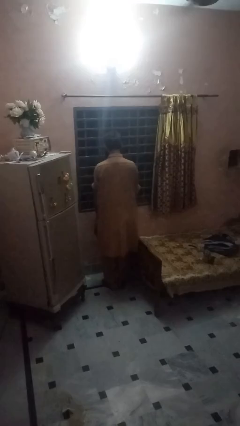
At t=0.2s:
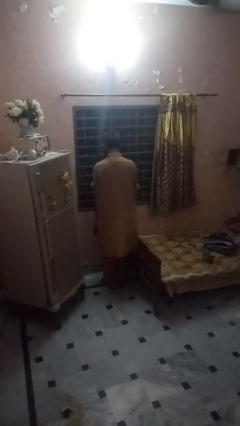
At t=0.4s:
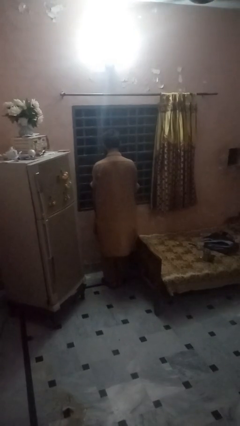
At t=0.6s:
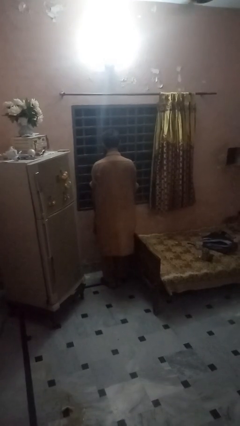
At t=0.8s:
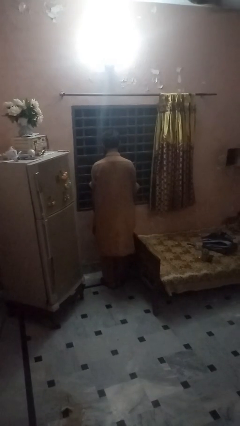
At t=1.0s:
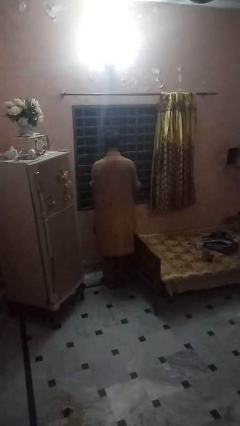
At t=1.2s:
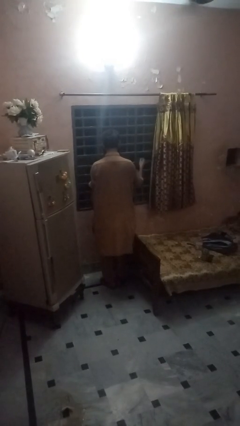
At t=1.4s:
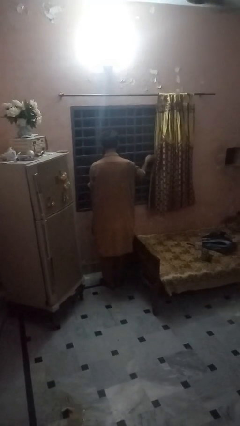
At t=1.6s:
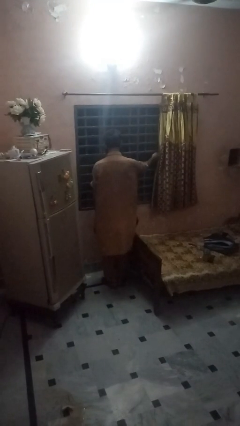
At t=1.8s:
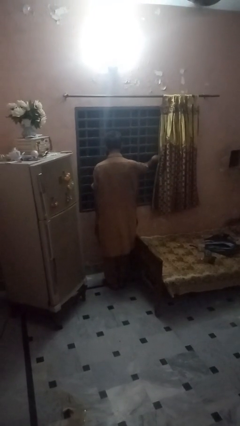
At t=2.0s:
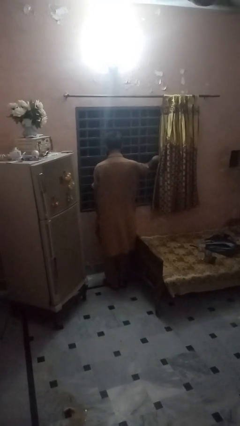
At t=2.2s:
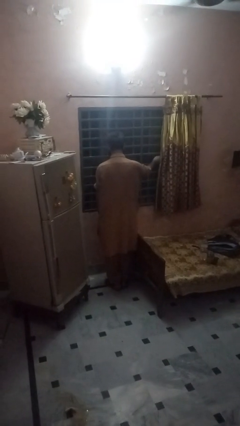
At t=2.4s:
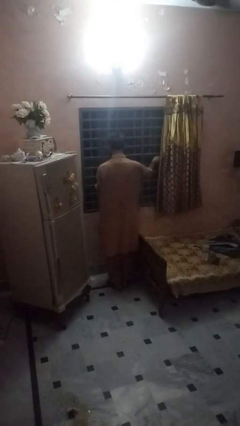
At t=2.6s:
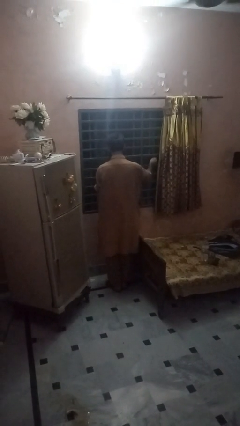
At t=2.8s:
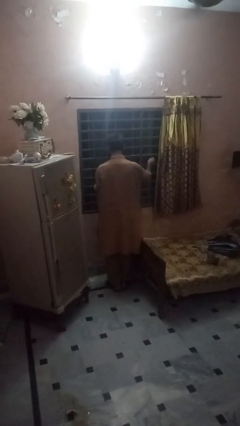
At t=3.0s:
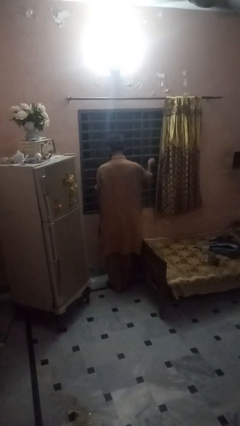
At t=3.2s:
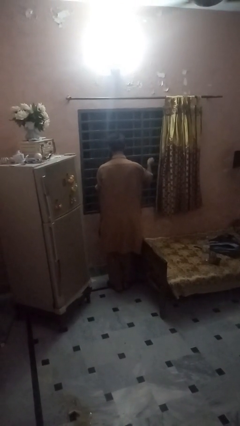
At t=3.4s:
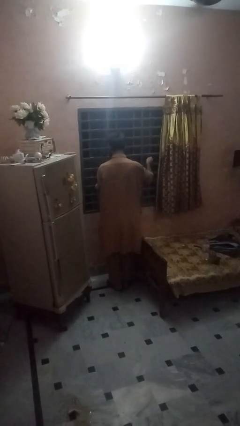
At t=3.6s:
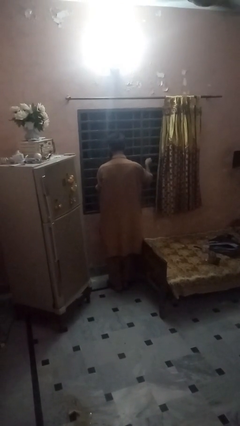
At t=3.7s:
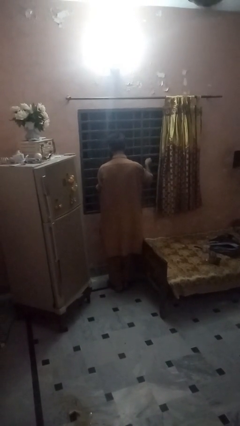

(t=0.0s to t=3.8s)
person closes home window

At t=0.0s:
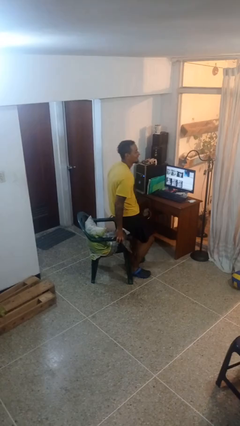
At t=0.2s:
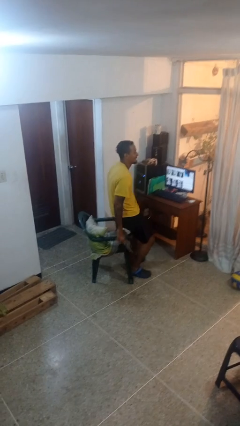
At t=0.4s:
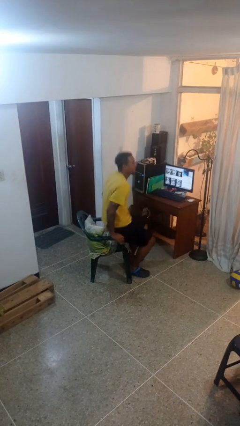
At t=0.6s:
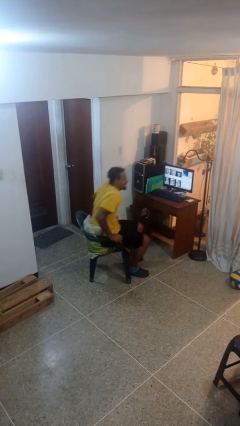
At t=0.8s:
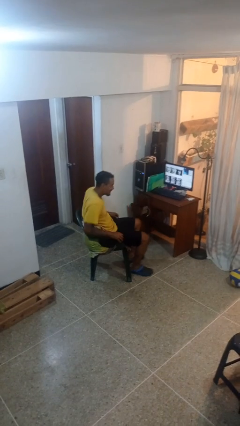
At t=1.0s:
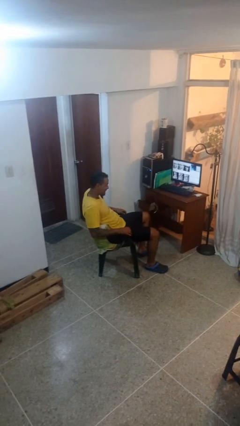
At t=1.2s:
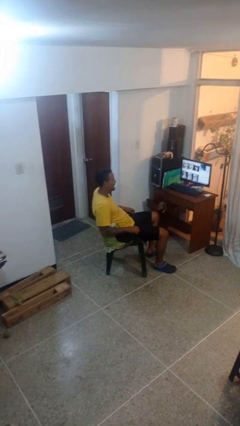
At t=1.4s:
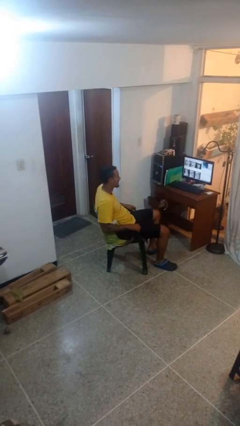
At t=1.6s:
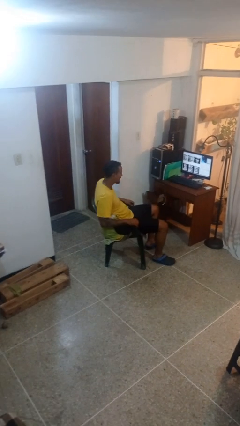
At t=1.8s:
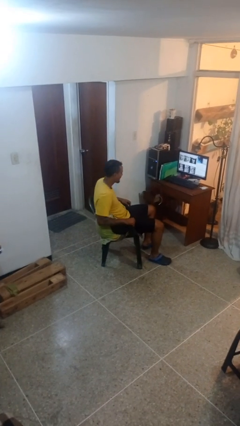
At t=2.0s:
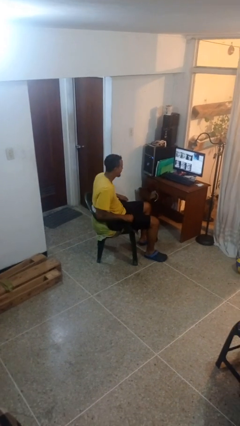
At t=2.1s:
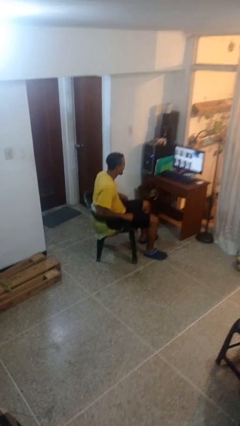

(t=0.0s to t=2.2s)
person sits down

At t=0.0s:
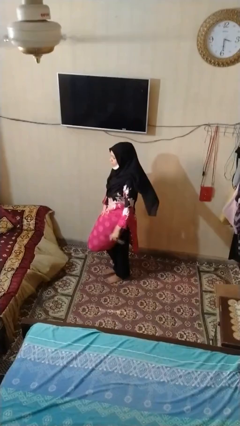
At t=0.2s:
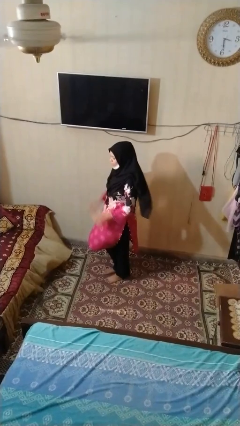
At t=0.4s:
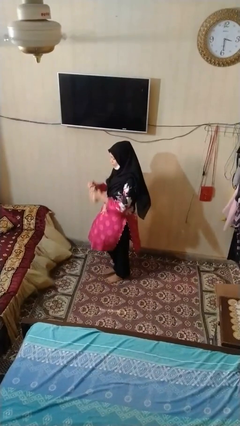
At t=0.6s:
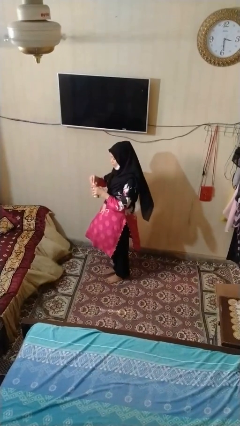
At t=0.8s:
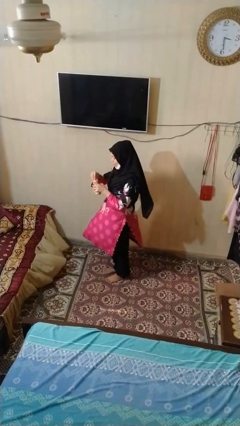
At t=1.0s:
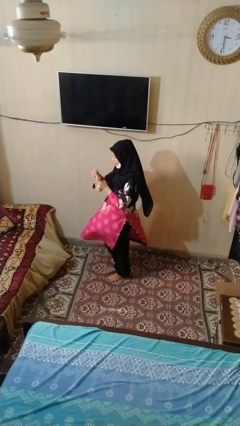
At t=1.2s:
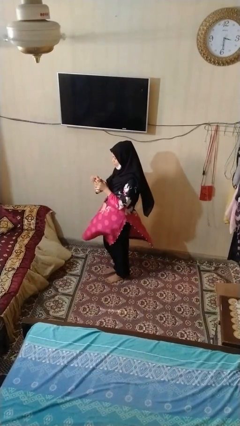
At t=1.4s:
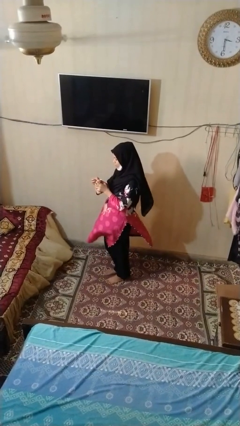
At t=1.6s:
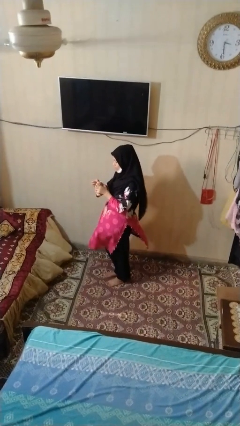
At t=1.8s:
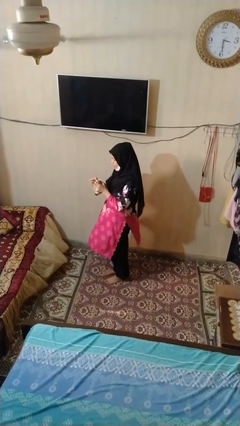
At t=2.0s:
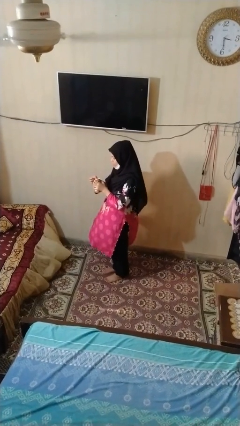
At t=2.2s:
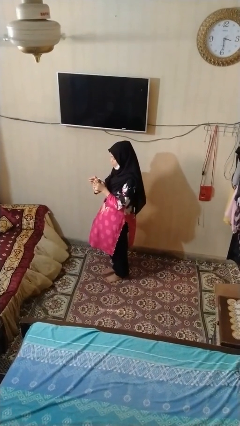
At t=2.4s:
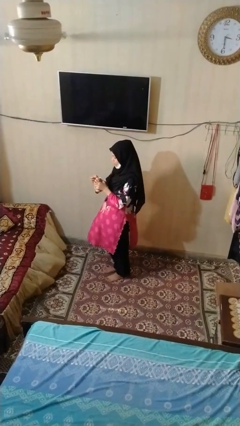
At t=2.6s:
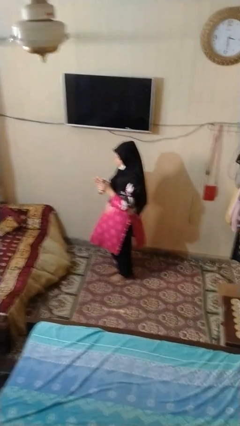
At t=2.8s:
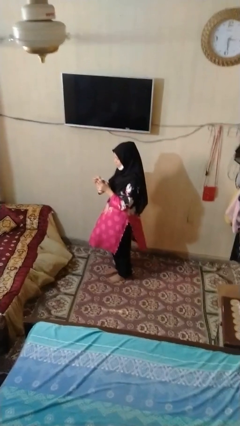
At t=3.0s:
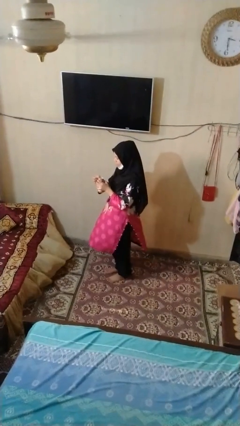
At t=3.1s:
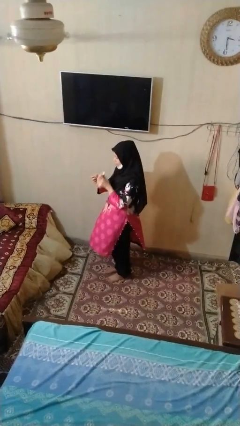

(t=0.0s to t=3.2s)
person opens beverage can

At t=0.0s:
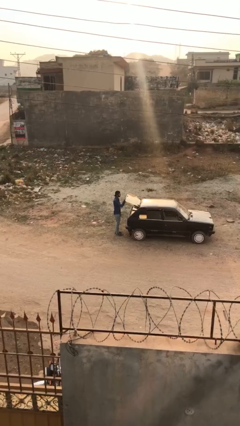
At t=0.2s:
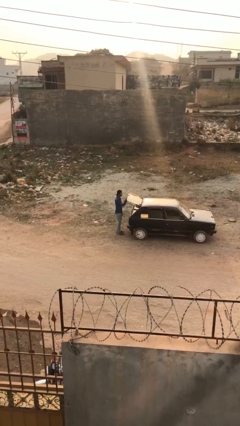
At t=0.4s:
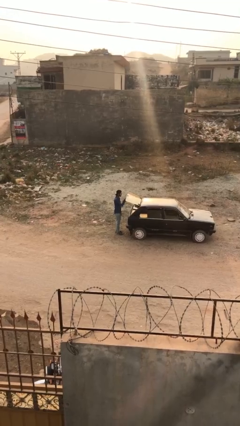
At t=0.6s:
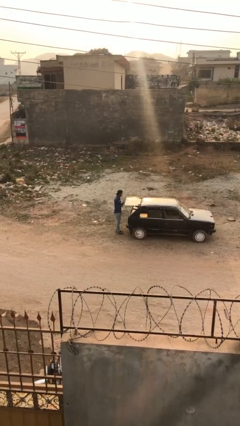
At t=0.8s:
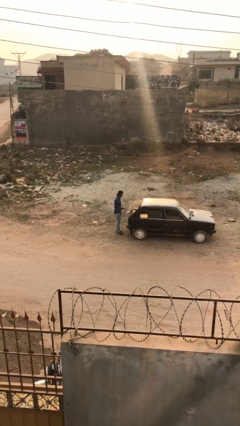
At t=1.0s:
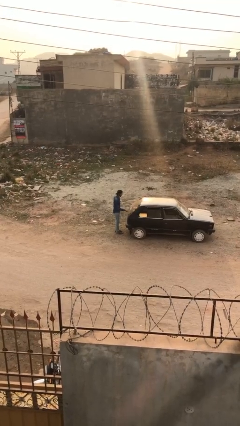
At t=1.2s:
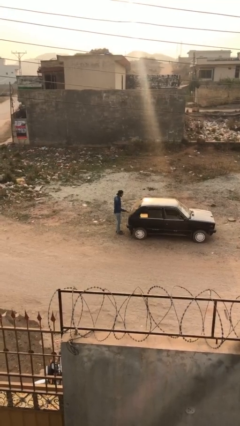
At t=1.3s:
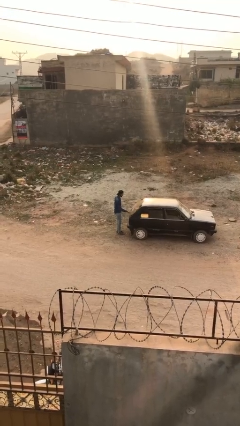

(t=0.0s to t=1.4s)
person closes car trunk

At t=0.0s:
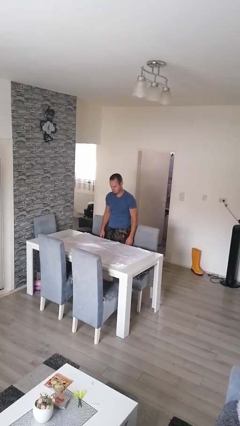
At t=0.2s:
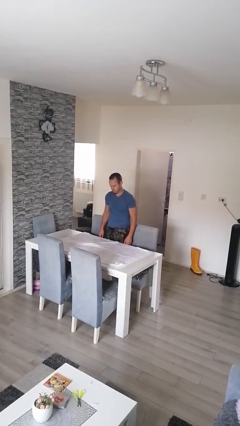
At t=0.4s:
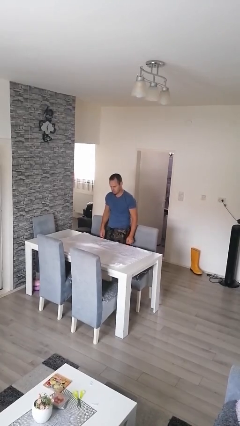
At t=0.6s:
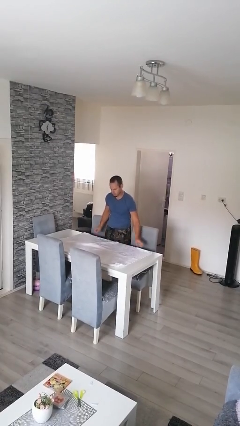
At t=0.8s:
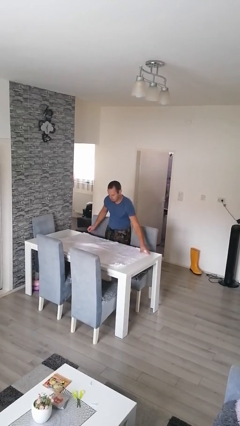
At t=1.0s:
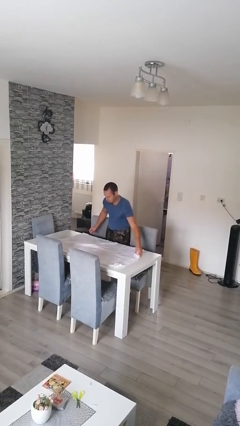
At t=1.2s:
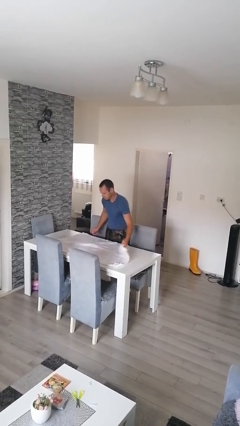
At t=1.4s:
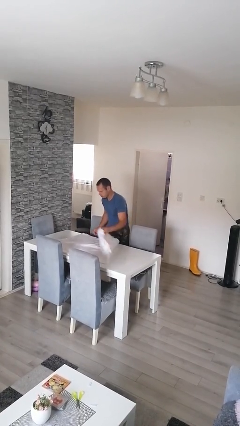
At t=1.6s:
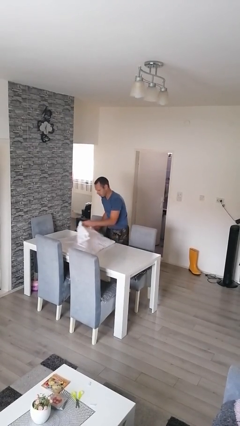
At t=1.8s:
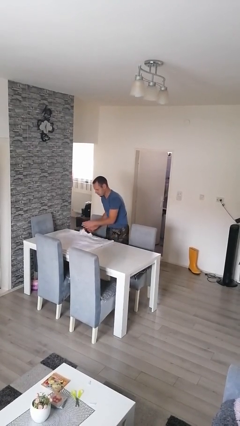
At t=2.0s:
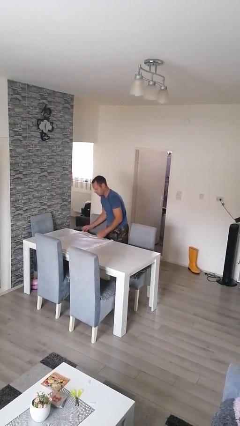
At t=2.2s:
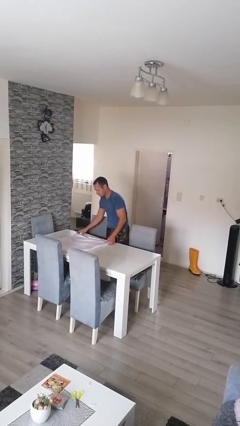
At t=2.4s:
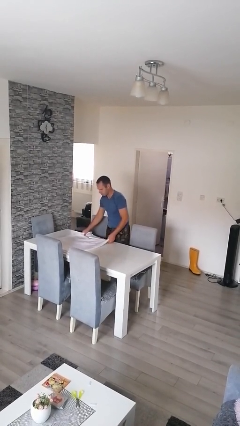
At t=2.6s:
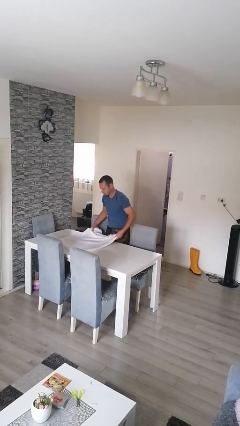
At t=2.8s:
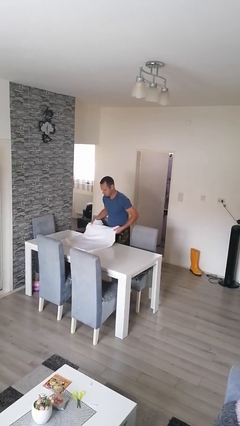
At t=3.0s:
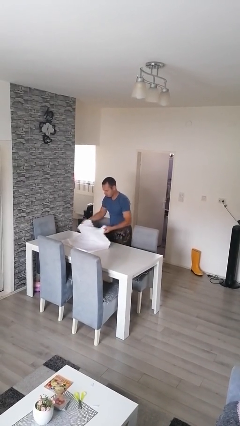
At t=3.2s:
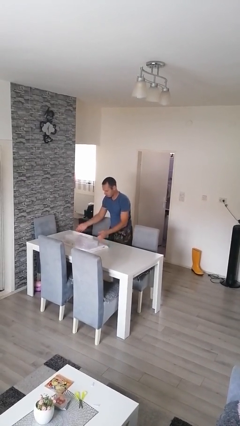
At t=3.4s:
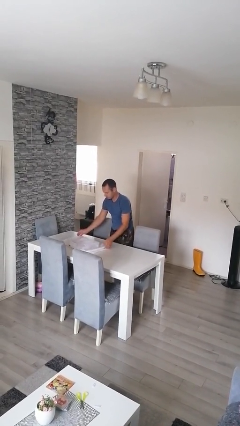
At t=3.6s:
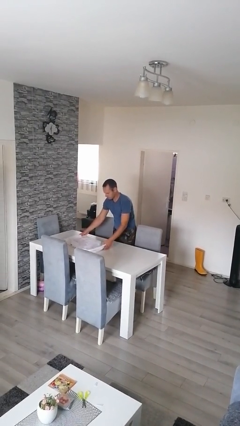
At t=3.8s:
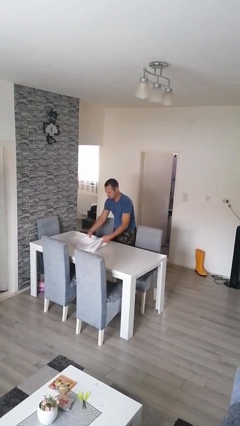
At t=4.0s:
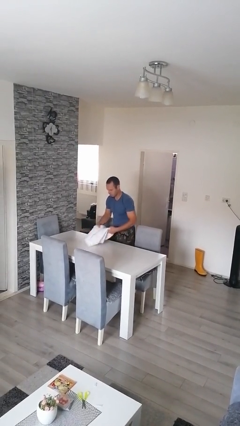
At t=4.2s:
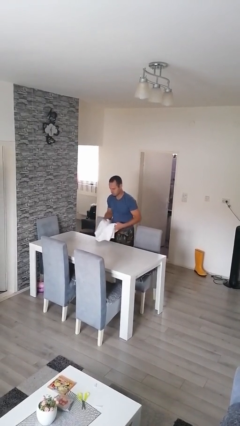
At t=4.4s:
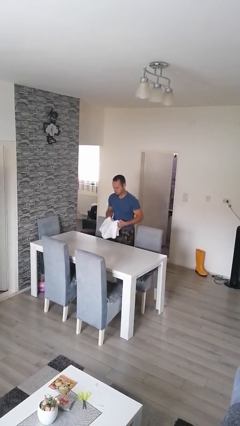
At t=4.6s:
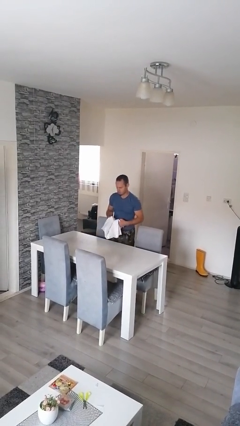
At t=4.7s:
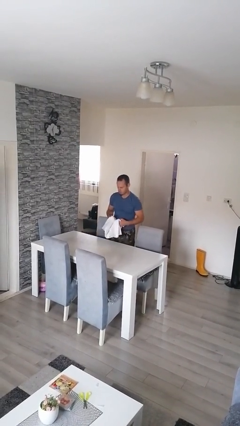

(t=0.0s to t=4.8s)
person folds tablecloth

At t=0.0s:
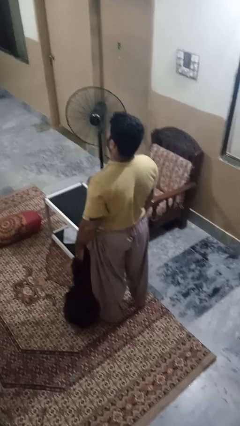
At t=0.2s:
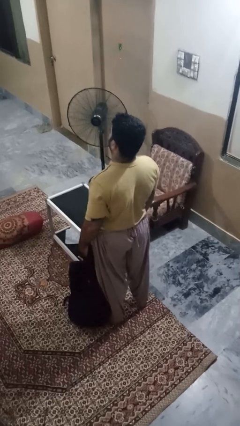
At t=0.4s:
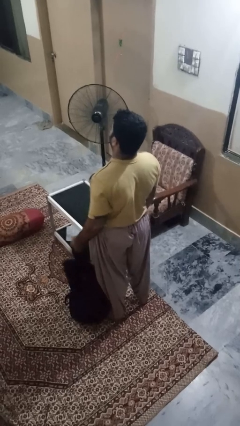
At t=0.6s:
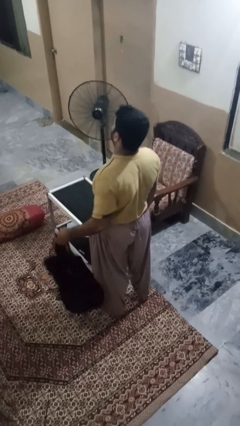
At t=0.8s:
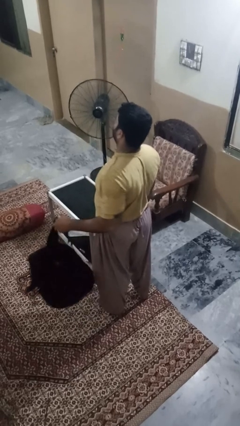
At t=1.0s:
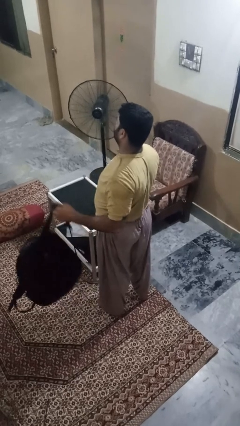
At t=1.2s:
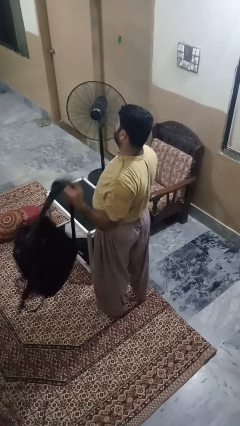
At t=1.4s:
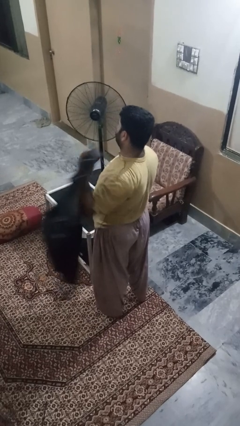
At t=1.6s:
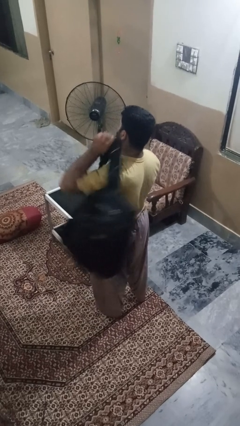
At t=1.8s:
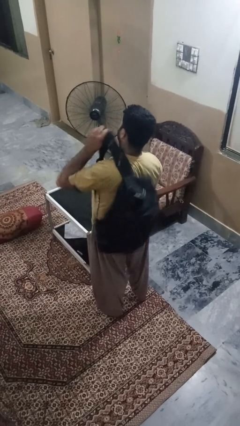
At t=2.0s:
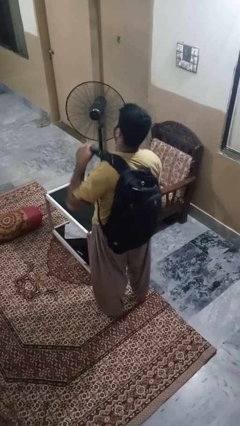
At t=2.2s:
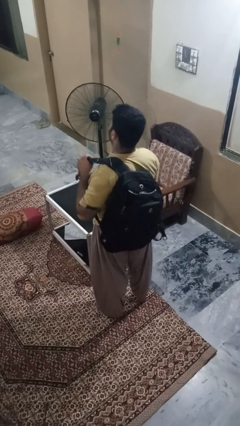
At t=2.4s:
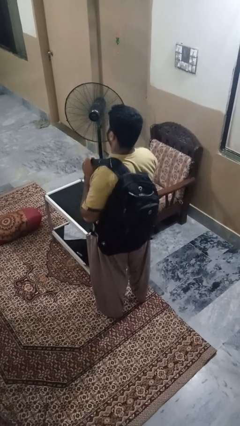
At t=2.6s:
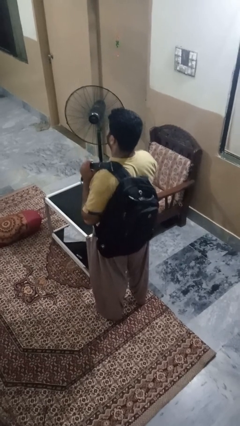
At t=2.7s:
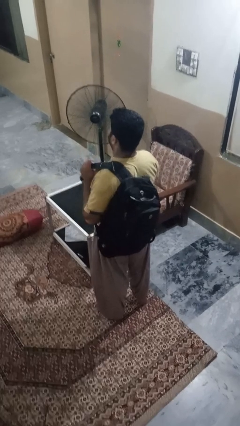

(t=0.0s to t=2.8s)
person puts on backpack
